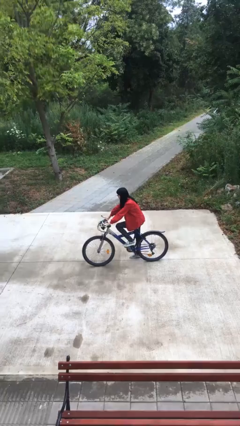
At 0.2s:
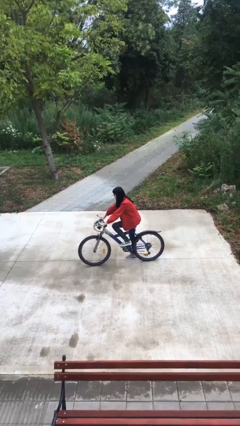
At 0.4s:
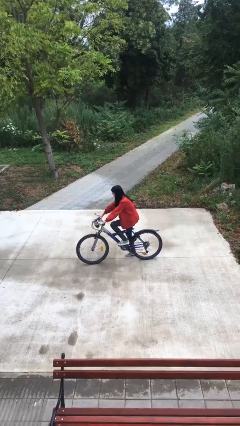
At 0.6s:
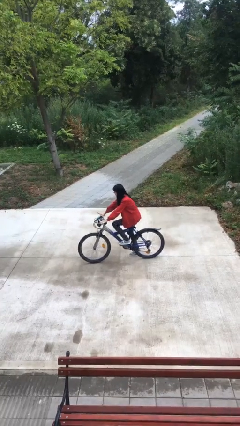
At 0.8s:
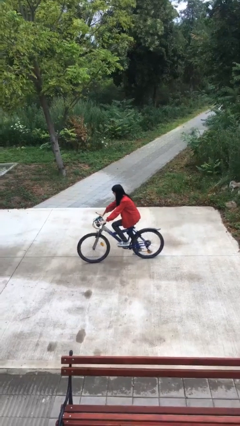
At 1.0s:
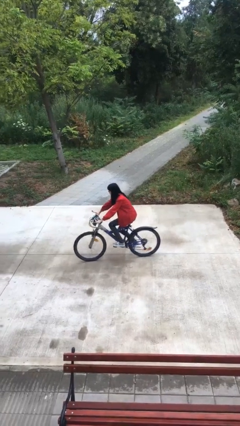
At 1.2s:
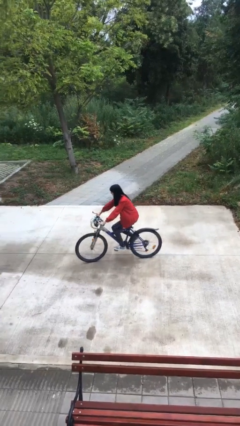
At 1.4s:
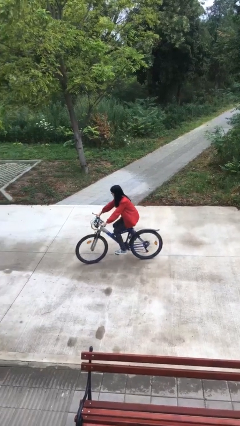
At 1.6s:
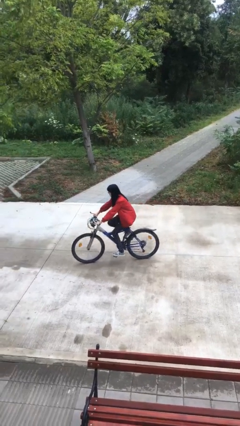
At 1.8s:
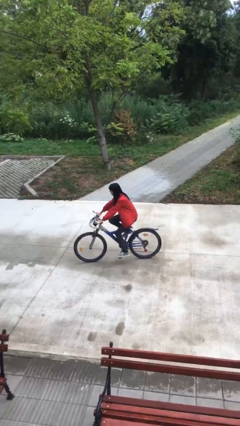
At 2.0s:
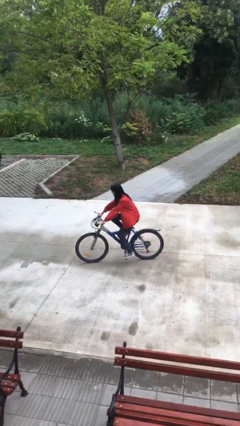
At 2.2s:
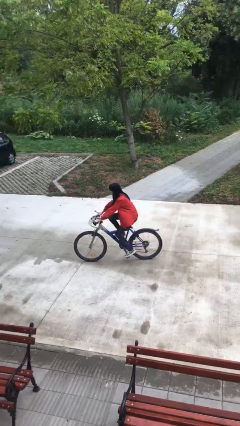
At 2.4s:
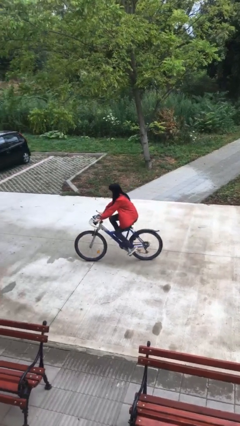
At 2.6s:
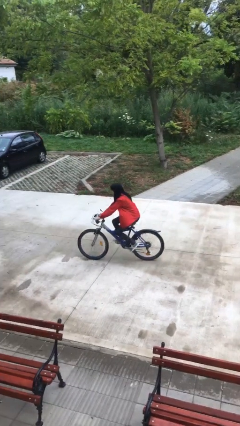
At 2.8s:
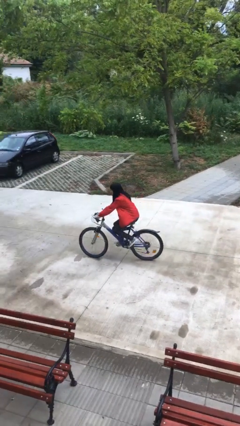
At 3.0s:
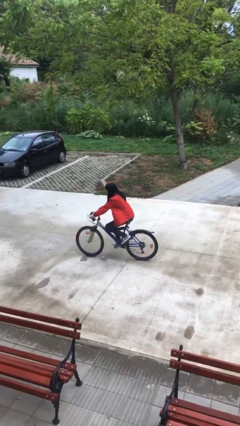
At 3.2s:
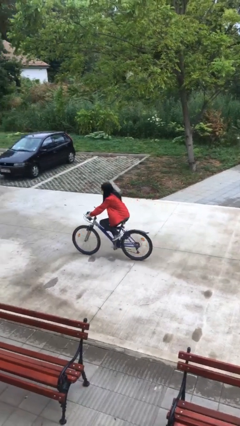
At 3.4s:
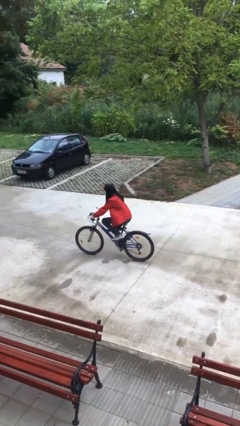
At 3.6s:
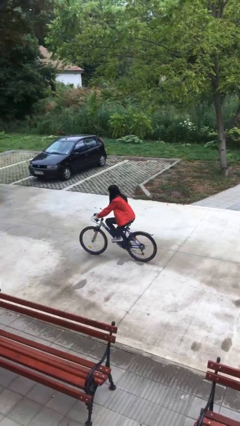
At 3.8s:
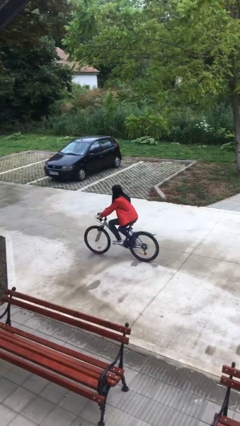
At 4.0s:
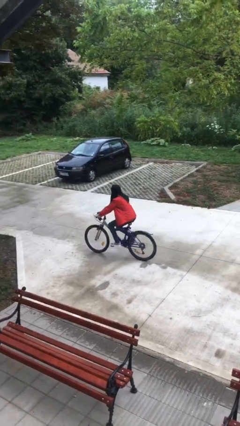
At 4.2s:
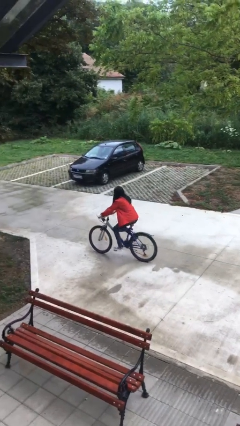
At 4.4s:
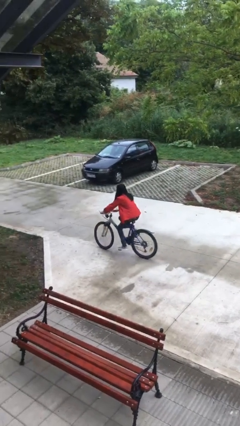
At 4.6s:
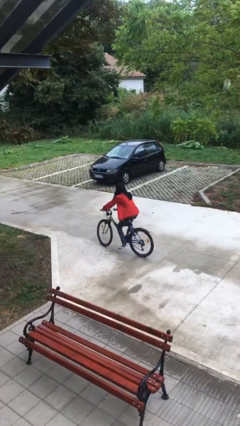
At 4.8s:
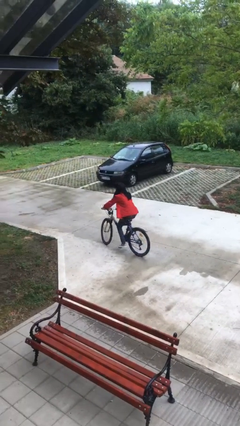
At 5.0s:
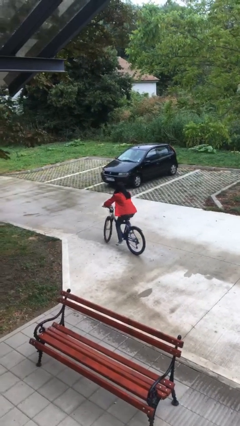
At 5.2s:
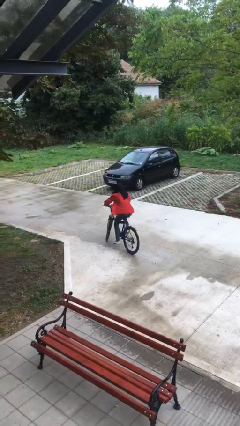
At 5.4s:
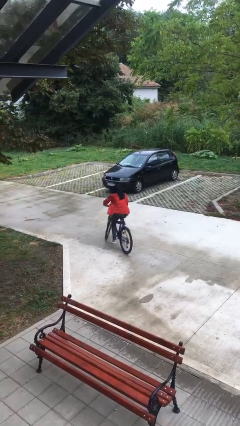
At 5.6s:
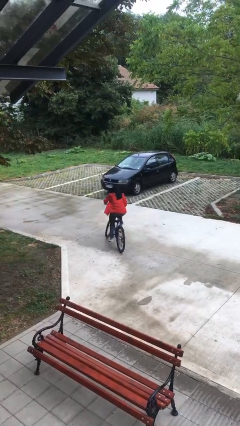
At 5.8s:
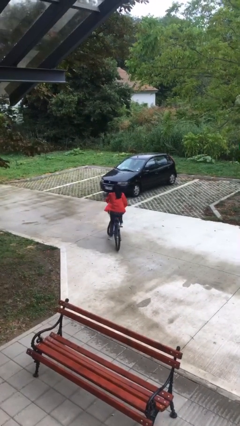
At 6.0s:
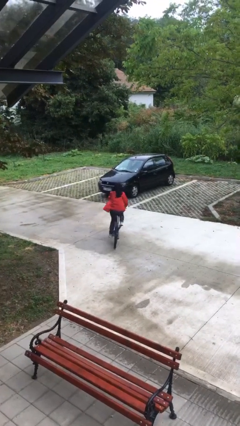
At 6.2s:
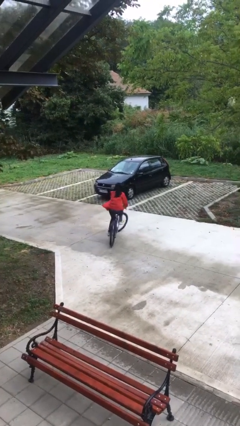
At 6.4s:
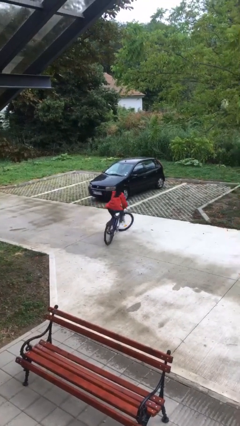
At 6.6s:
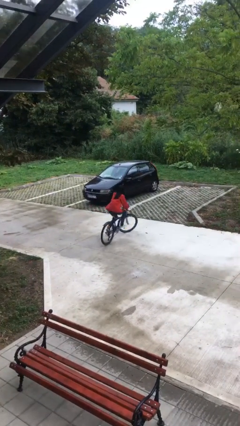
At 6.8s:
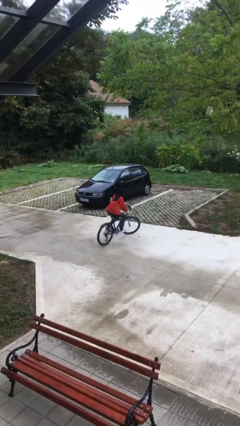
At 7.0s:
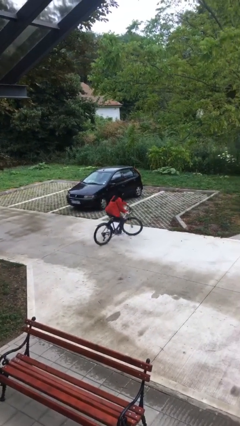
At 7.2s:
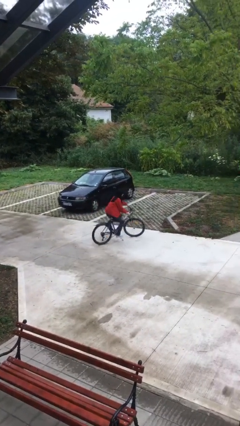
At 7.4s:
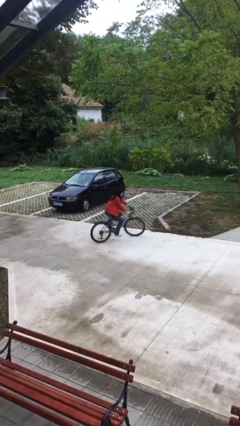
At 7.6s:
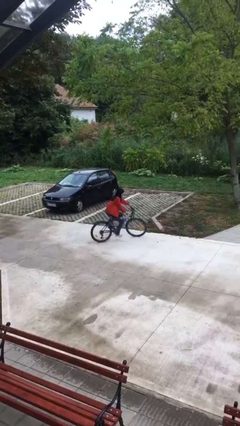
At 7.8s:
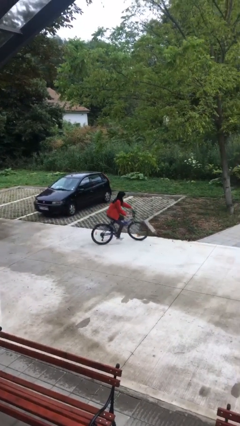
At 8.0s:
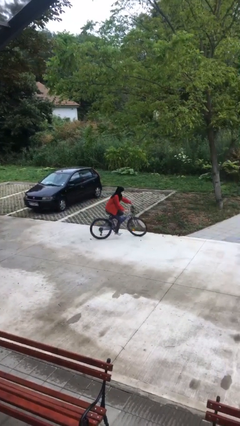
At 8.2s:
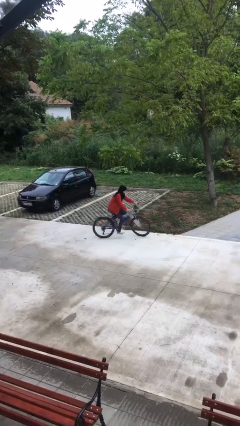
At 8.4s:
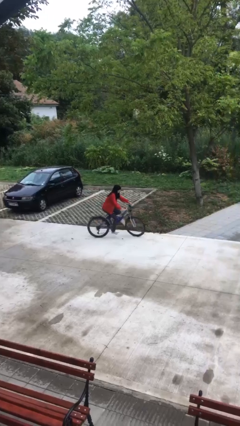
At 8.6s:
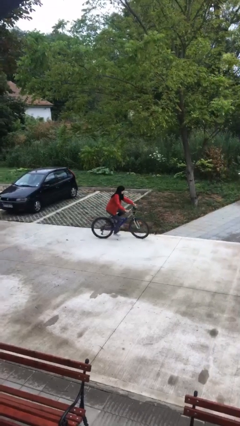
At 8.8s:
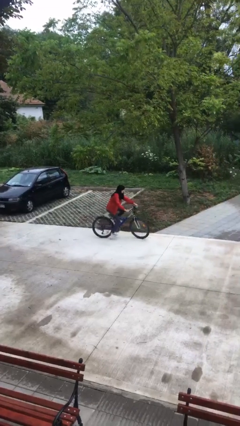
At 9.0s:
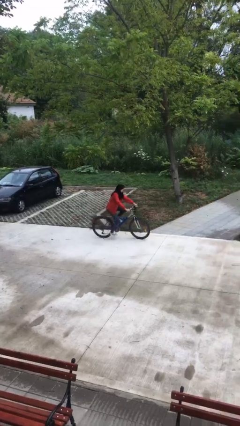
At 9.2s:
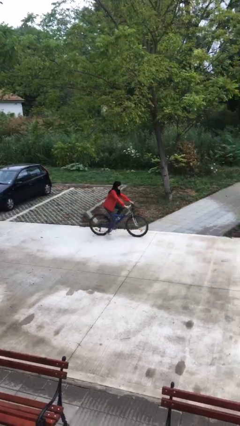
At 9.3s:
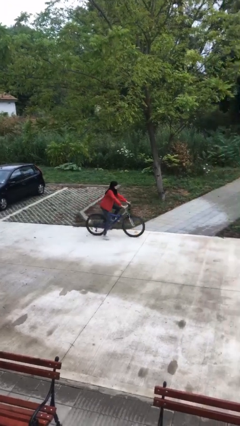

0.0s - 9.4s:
person rides bicycle

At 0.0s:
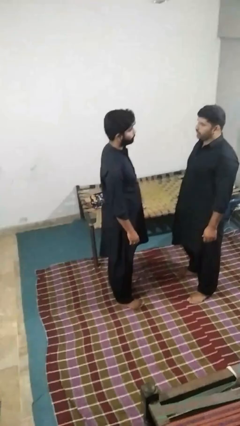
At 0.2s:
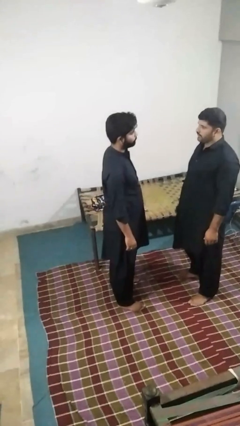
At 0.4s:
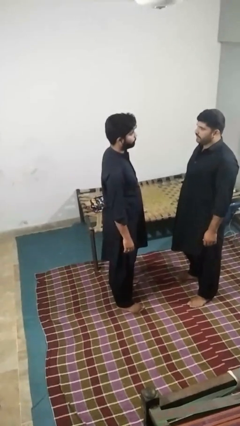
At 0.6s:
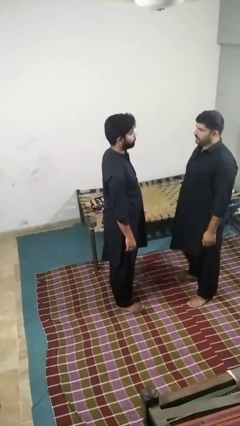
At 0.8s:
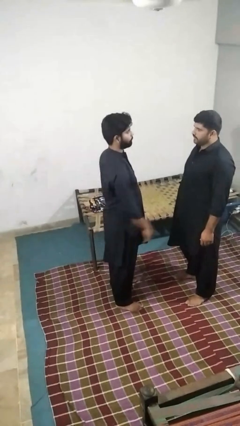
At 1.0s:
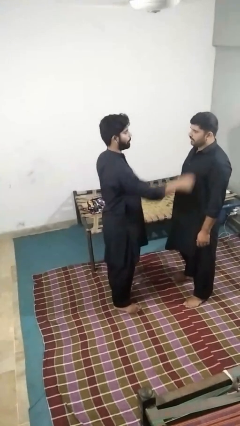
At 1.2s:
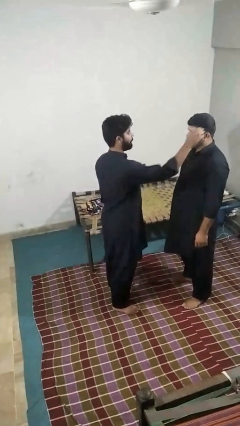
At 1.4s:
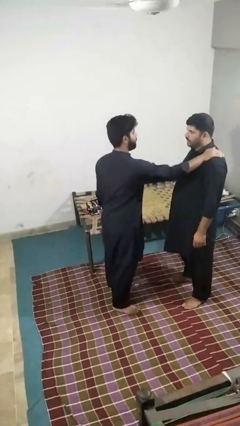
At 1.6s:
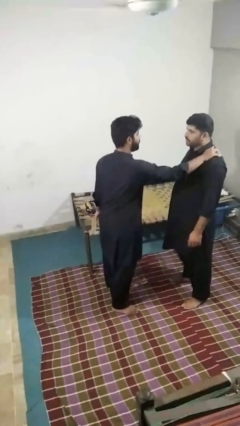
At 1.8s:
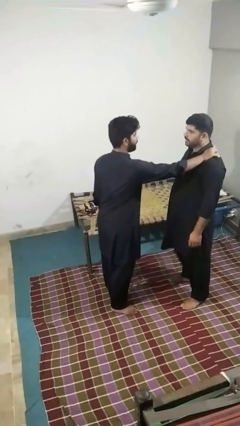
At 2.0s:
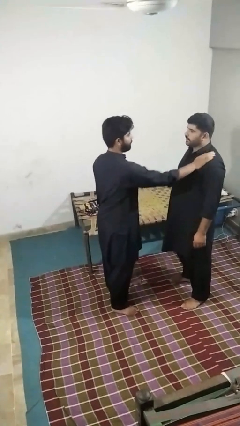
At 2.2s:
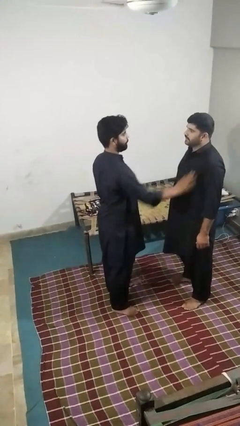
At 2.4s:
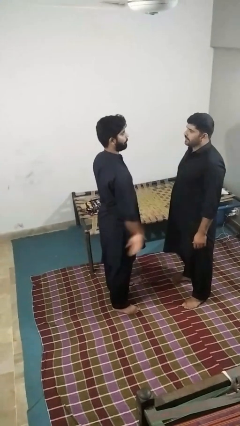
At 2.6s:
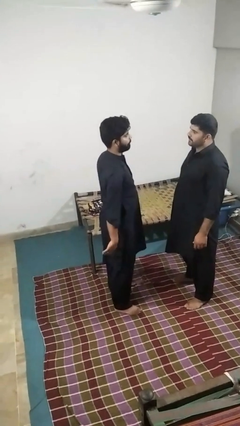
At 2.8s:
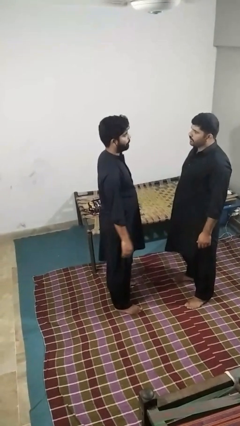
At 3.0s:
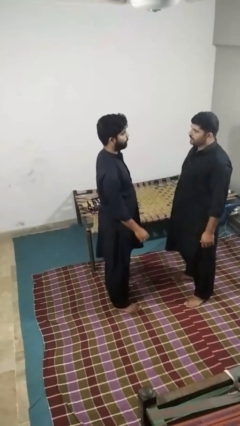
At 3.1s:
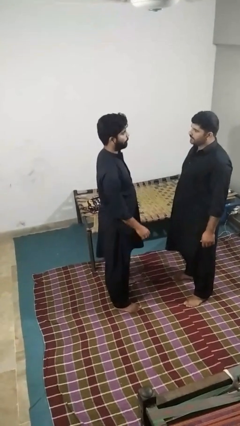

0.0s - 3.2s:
person pounds shoulders of person

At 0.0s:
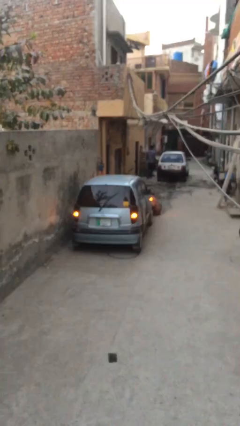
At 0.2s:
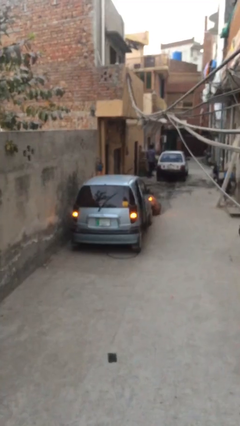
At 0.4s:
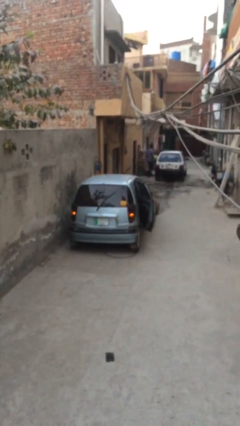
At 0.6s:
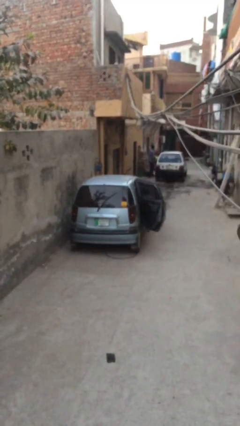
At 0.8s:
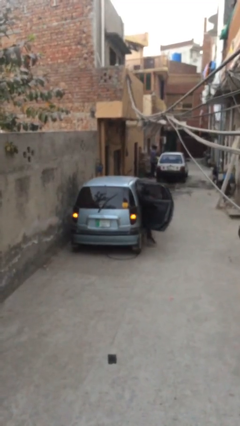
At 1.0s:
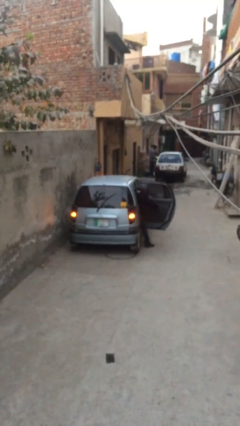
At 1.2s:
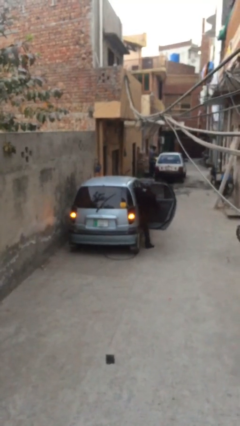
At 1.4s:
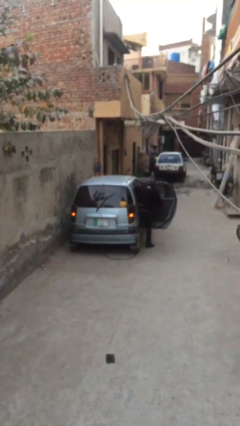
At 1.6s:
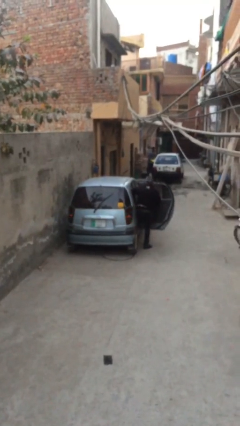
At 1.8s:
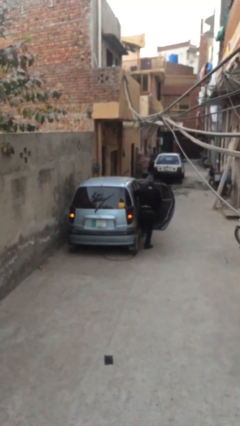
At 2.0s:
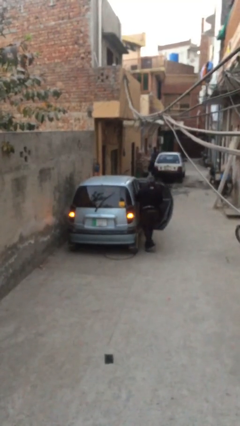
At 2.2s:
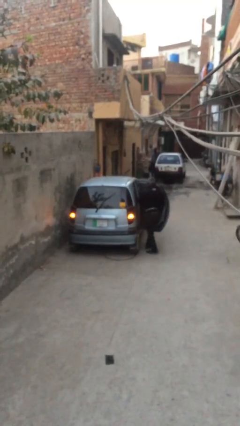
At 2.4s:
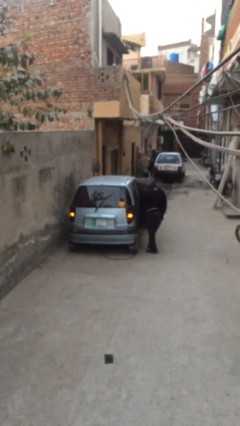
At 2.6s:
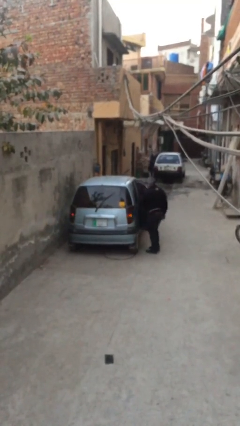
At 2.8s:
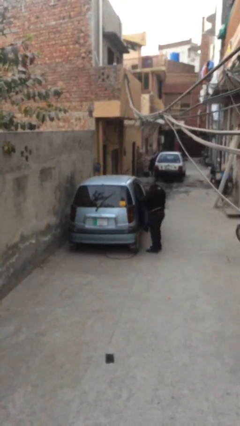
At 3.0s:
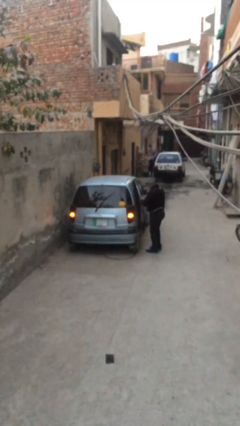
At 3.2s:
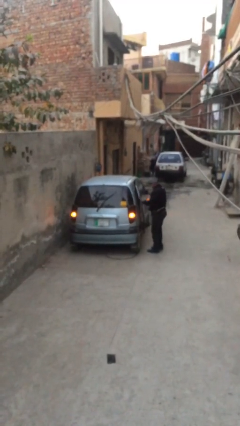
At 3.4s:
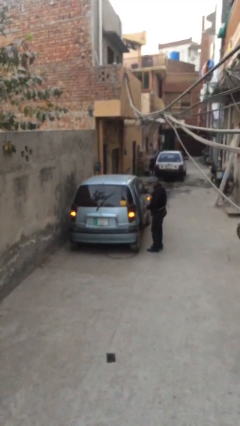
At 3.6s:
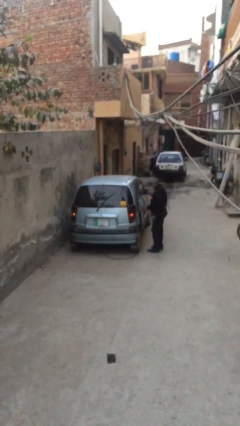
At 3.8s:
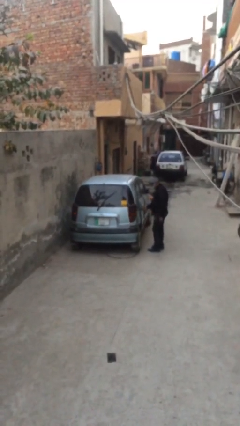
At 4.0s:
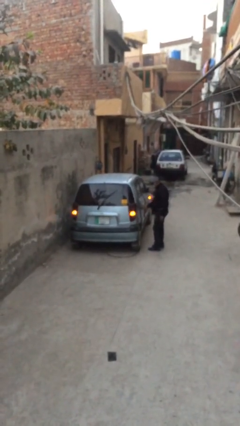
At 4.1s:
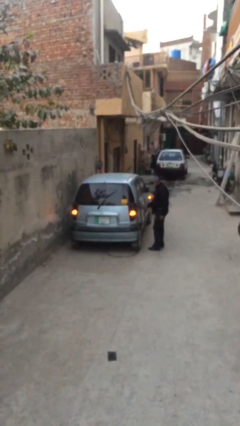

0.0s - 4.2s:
car drops off person

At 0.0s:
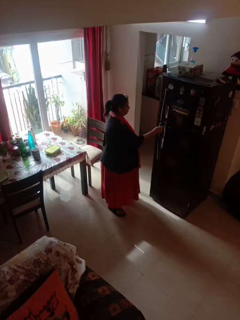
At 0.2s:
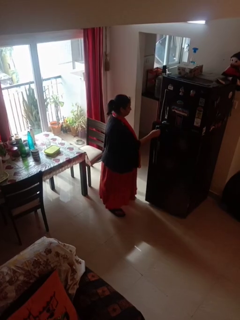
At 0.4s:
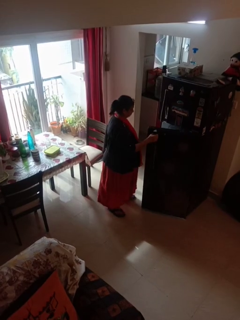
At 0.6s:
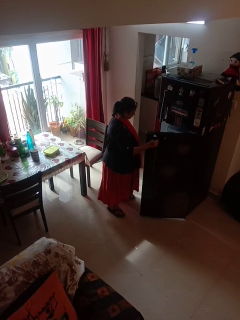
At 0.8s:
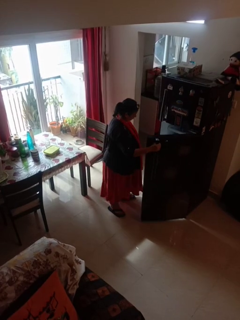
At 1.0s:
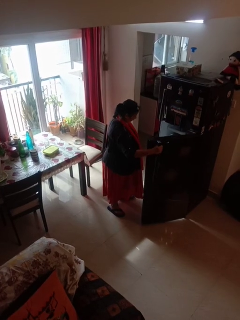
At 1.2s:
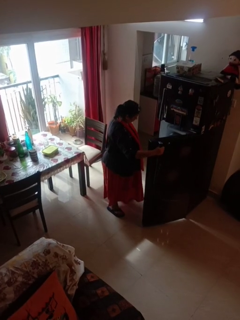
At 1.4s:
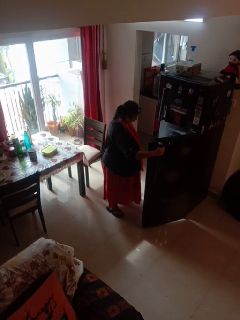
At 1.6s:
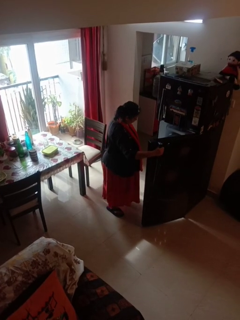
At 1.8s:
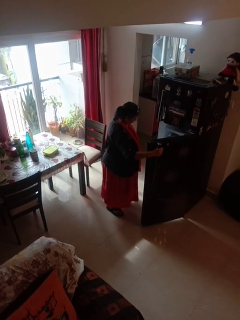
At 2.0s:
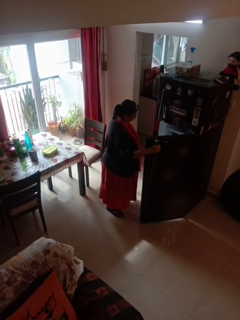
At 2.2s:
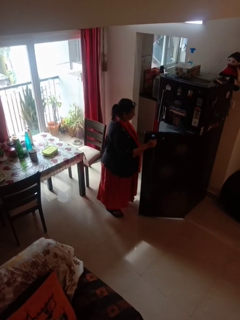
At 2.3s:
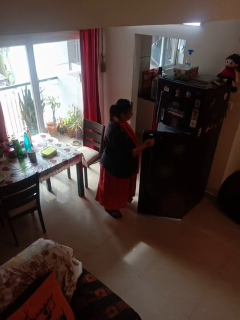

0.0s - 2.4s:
person opens refrigerator
